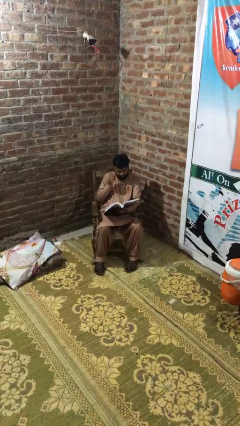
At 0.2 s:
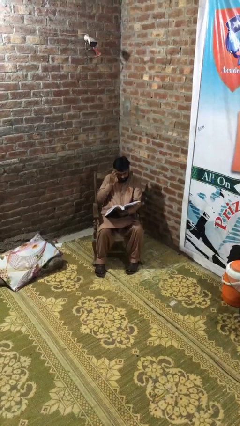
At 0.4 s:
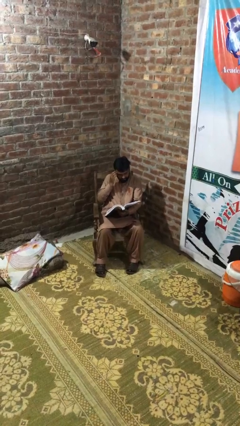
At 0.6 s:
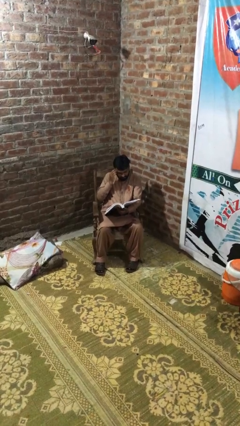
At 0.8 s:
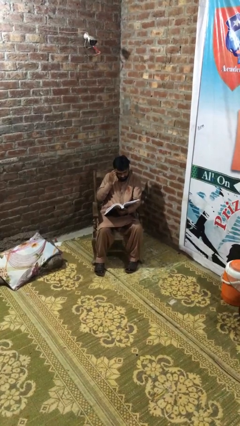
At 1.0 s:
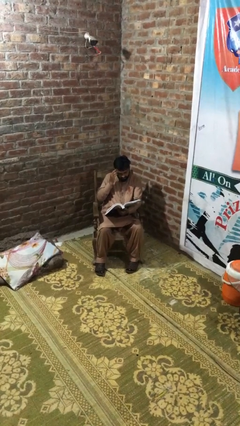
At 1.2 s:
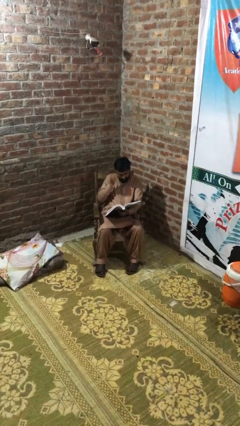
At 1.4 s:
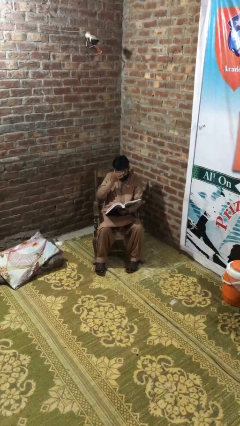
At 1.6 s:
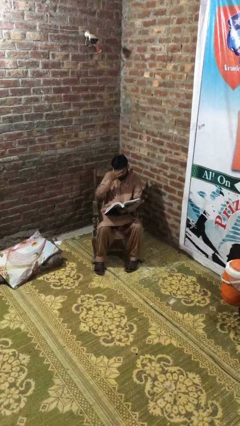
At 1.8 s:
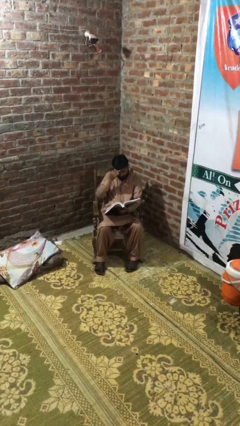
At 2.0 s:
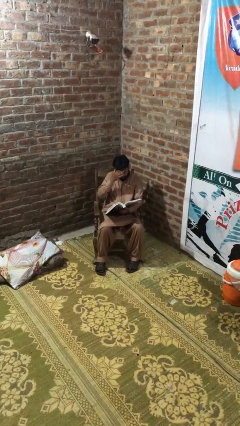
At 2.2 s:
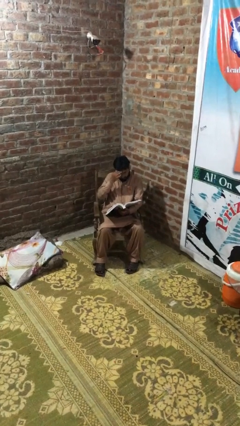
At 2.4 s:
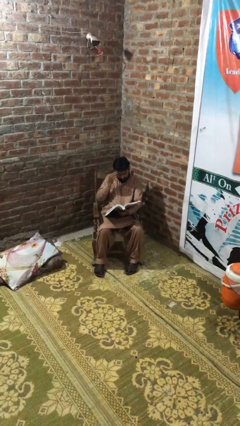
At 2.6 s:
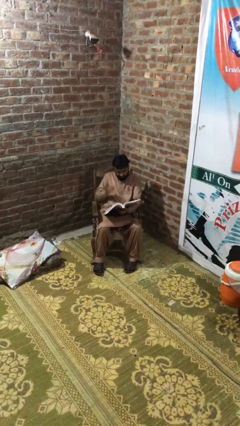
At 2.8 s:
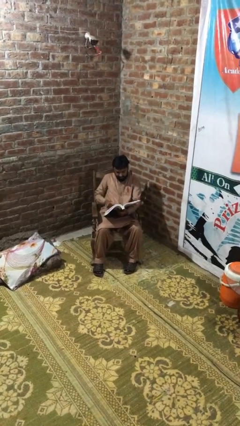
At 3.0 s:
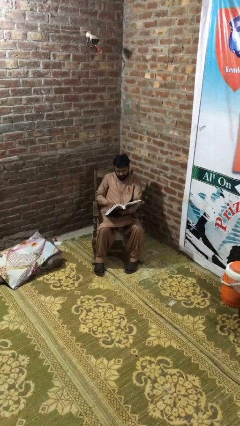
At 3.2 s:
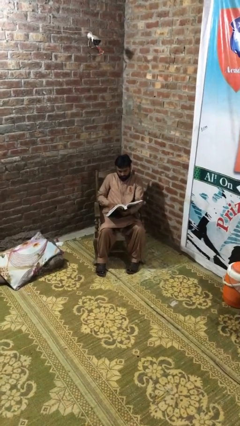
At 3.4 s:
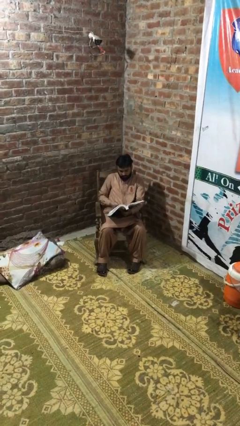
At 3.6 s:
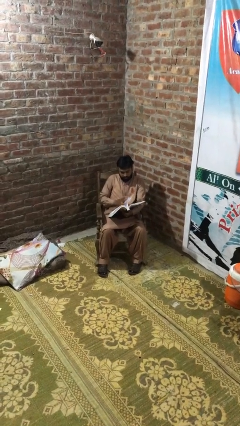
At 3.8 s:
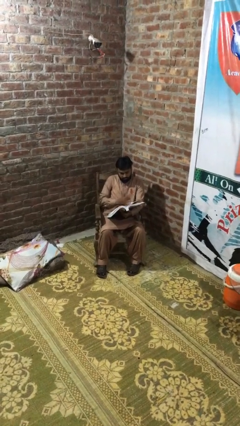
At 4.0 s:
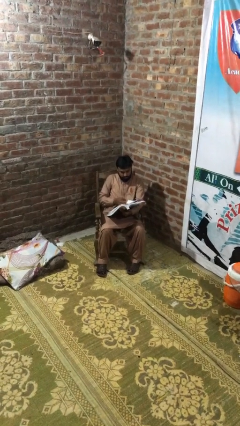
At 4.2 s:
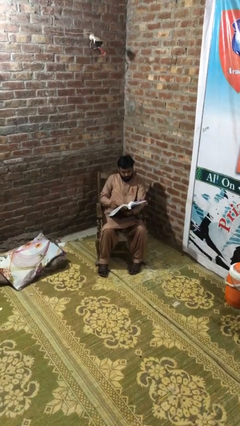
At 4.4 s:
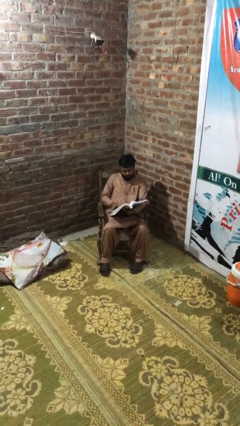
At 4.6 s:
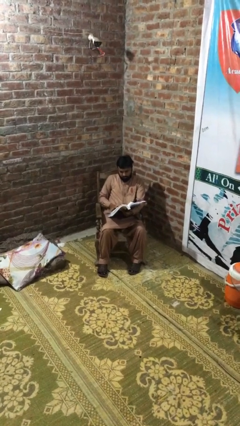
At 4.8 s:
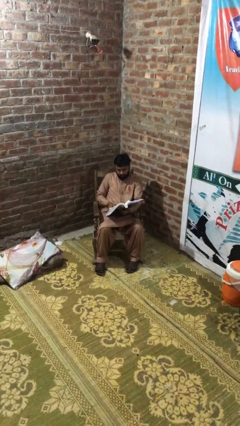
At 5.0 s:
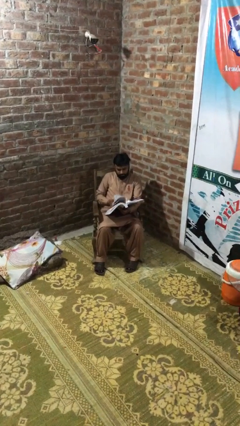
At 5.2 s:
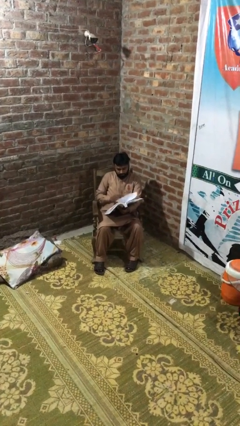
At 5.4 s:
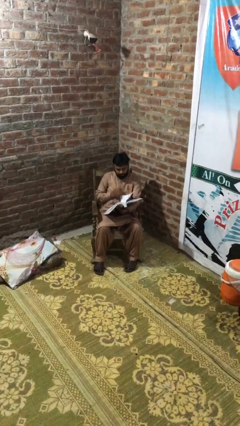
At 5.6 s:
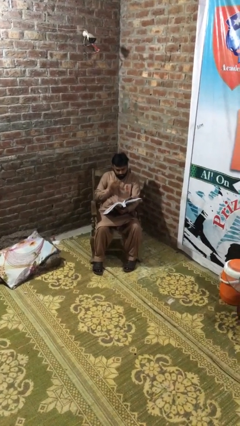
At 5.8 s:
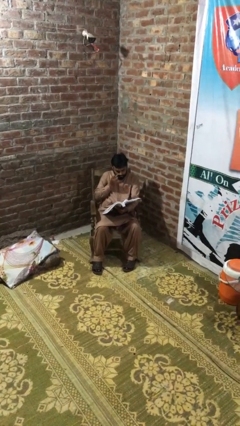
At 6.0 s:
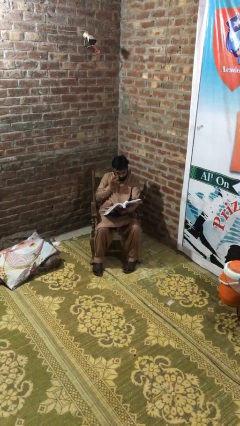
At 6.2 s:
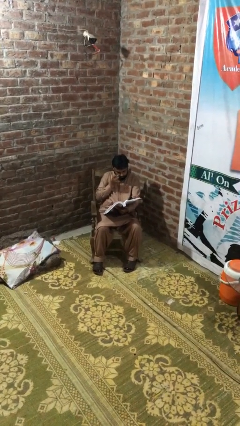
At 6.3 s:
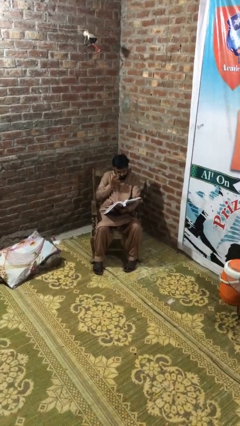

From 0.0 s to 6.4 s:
person reads document

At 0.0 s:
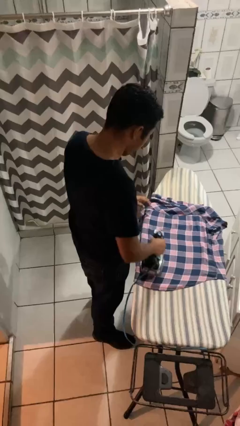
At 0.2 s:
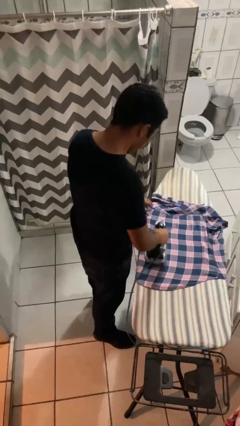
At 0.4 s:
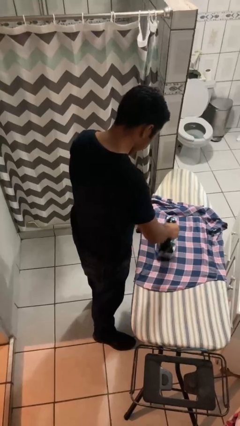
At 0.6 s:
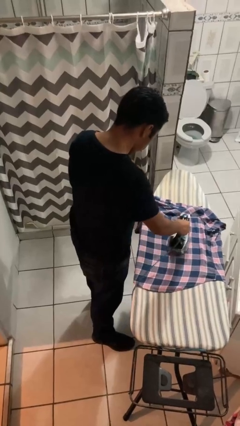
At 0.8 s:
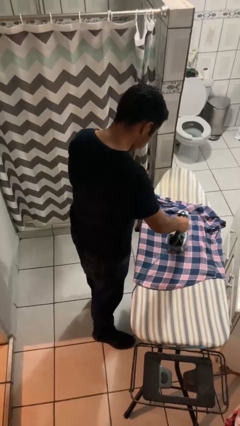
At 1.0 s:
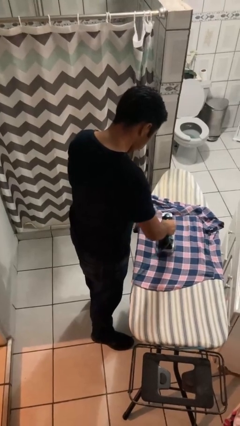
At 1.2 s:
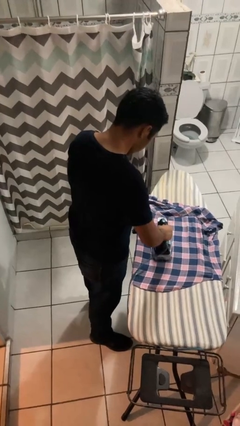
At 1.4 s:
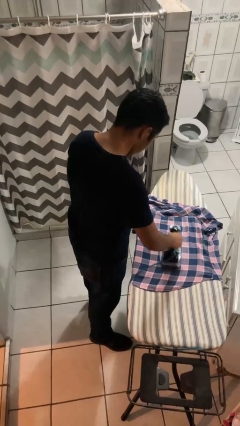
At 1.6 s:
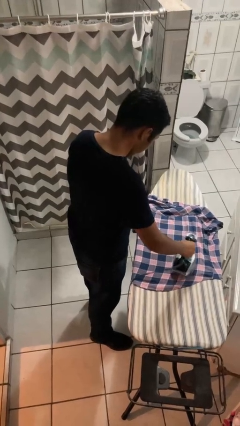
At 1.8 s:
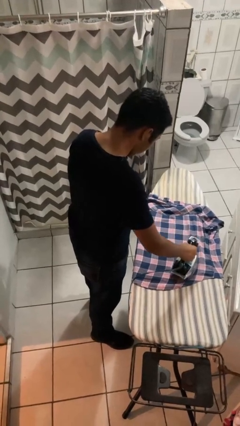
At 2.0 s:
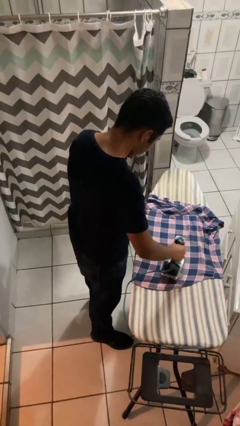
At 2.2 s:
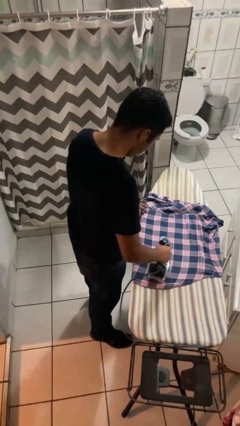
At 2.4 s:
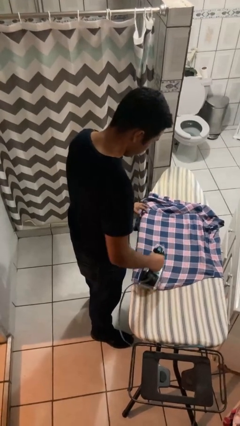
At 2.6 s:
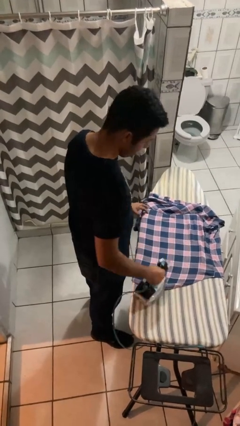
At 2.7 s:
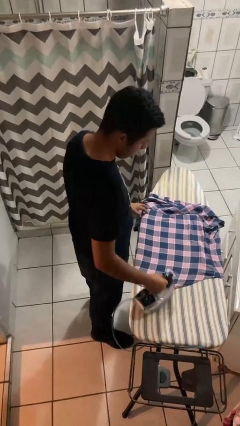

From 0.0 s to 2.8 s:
person irons clothes

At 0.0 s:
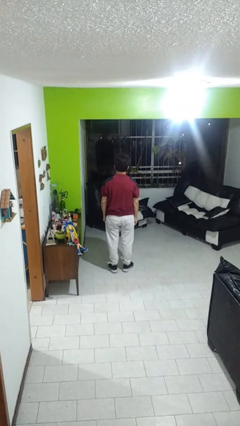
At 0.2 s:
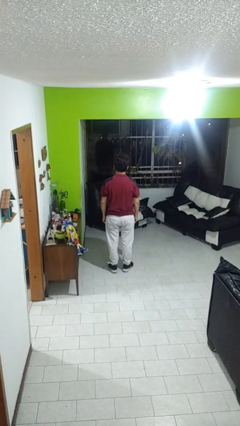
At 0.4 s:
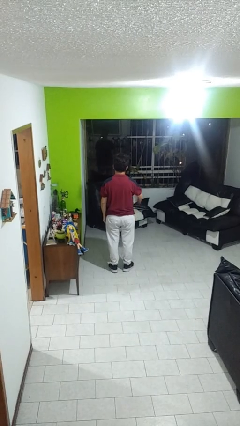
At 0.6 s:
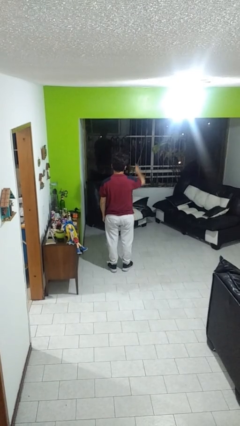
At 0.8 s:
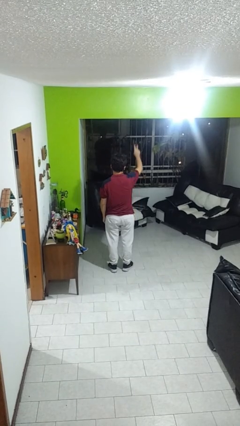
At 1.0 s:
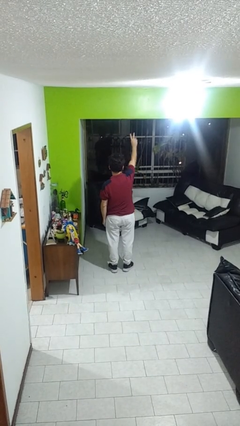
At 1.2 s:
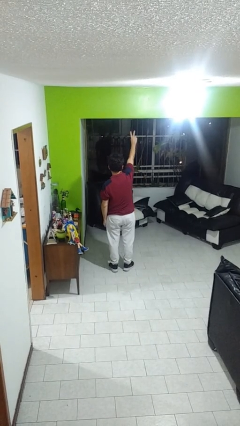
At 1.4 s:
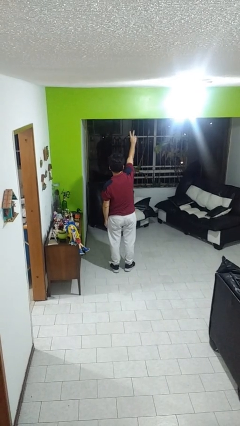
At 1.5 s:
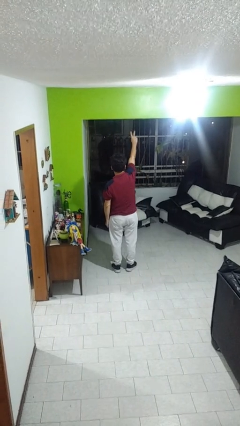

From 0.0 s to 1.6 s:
person gestures peace

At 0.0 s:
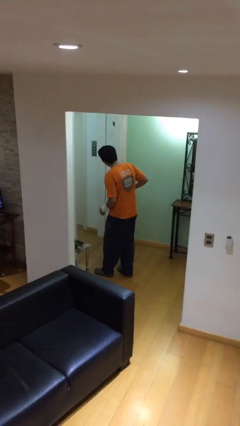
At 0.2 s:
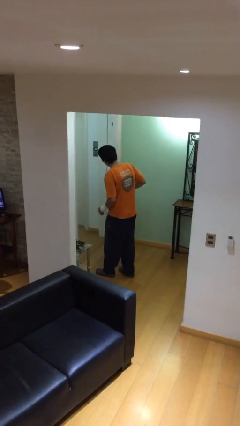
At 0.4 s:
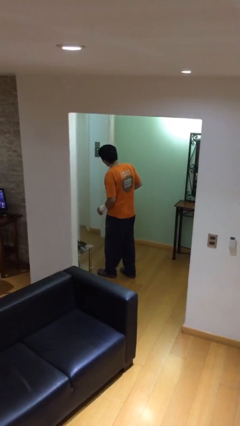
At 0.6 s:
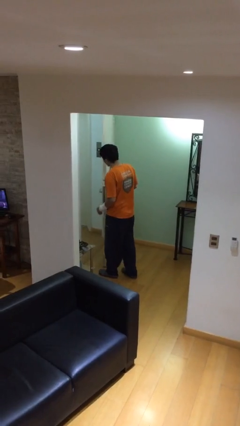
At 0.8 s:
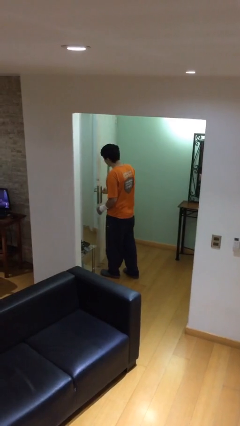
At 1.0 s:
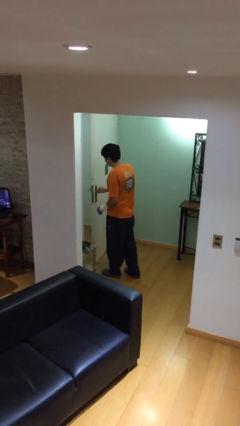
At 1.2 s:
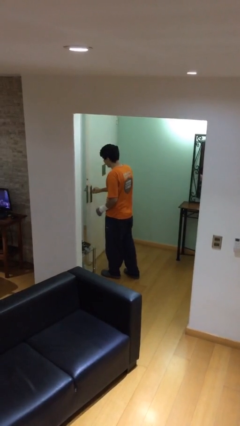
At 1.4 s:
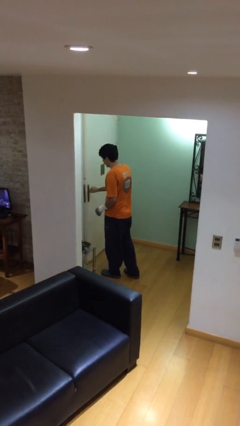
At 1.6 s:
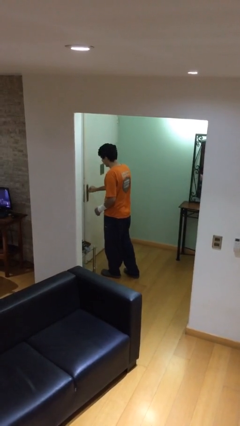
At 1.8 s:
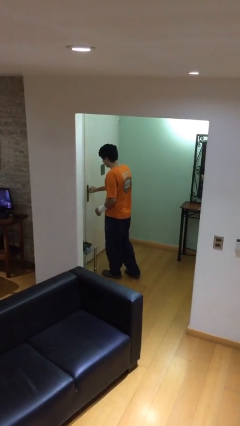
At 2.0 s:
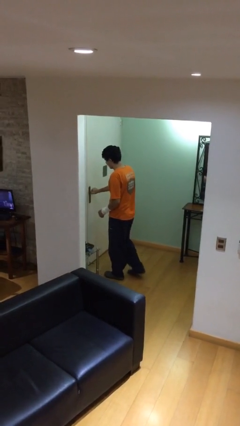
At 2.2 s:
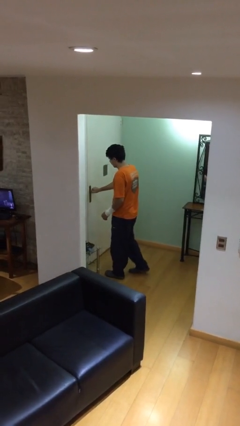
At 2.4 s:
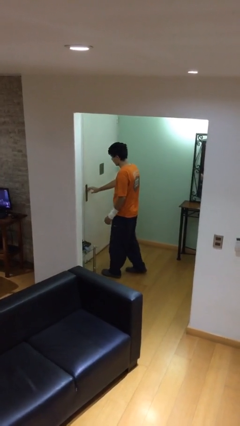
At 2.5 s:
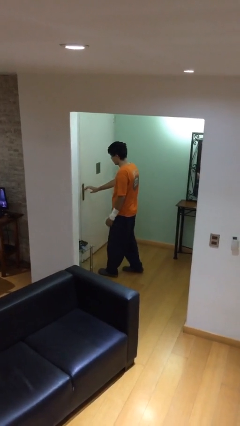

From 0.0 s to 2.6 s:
person closes facility door

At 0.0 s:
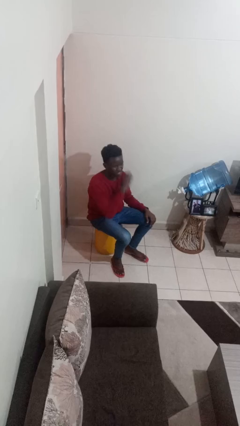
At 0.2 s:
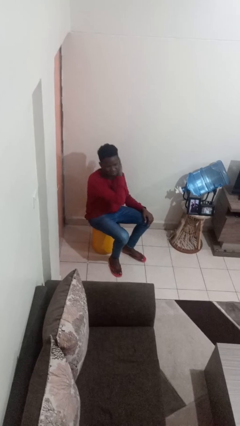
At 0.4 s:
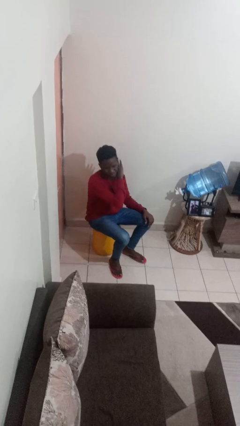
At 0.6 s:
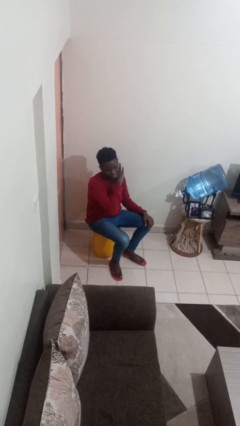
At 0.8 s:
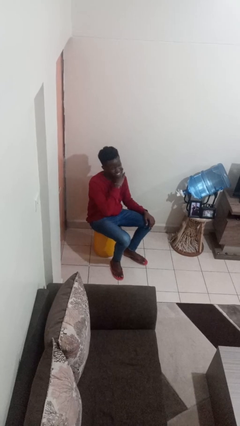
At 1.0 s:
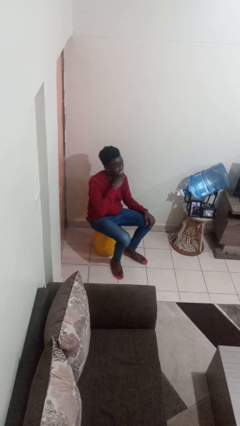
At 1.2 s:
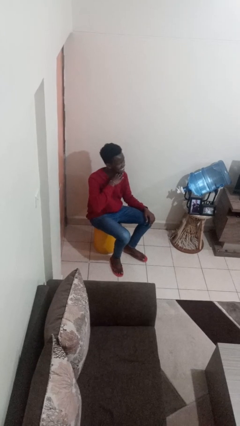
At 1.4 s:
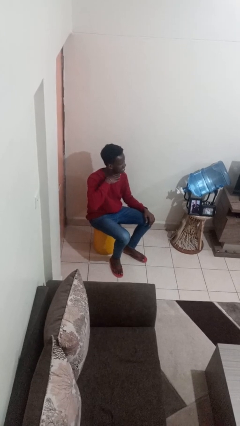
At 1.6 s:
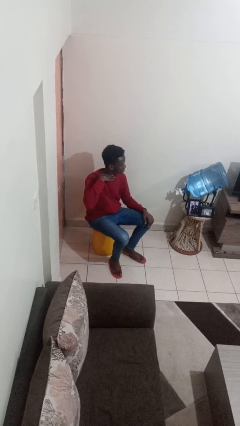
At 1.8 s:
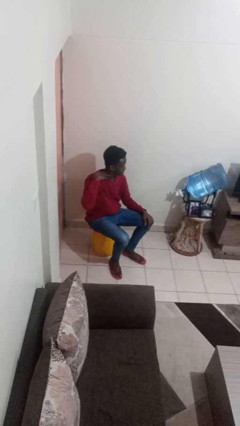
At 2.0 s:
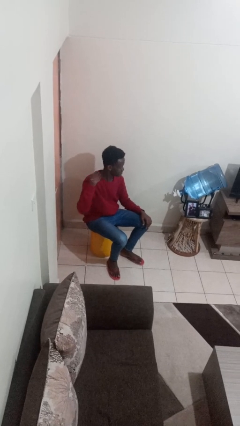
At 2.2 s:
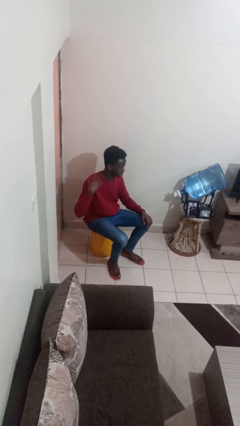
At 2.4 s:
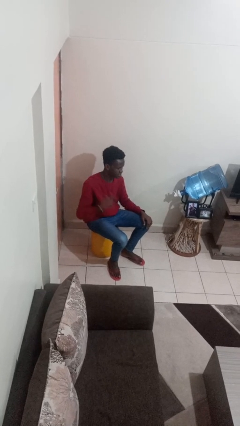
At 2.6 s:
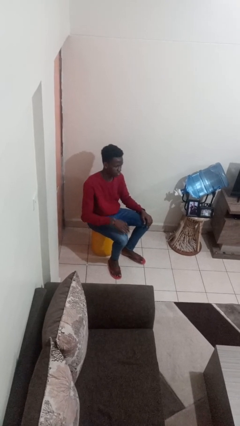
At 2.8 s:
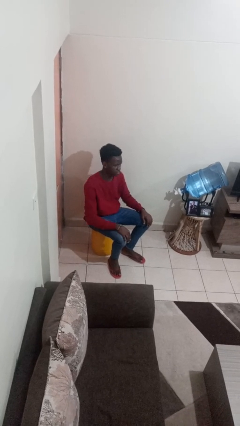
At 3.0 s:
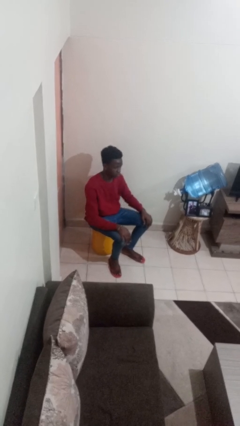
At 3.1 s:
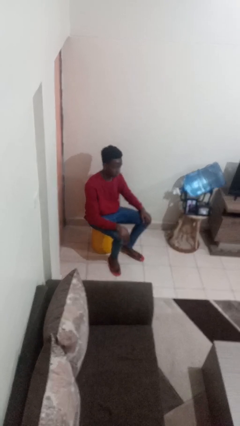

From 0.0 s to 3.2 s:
person gestures cut

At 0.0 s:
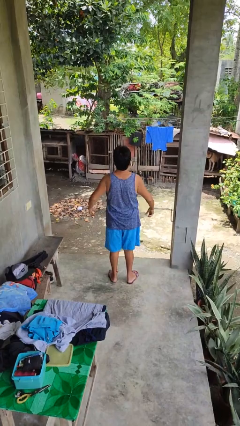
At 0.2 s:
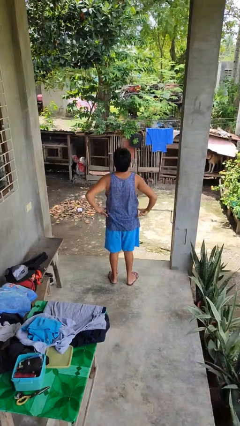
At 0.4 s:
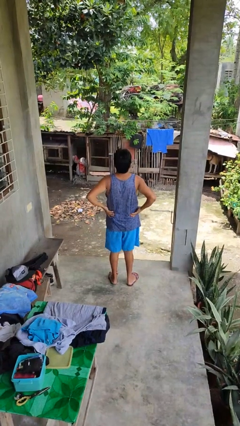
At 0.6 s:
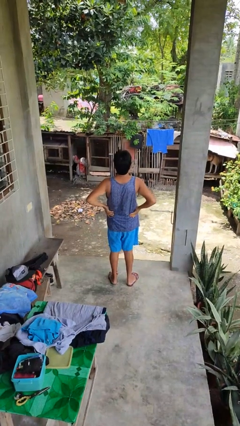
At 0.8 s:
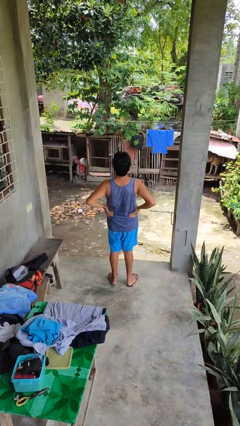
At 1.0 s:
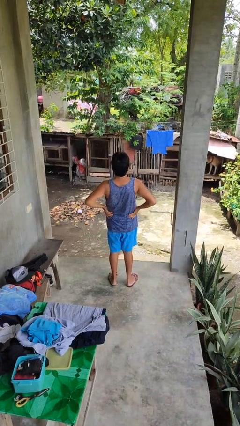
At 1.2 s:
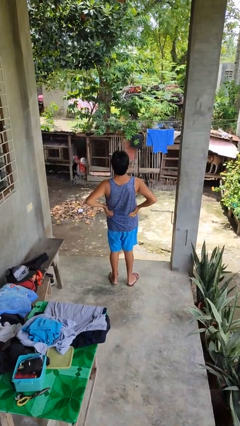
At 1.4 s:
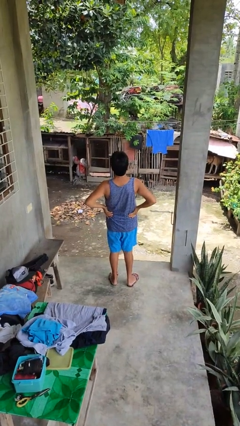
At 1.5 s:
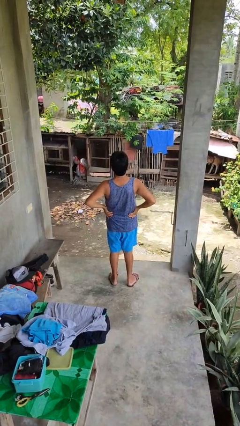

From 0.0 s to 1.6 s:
person stretches back
